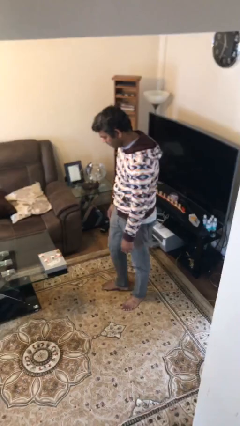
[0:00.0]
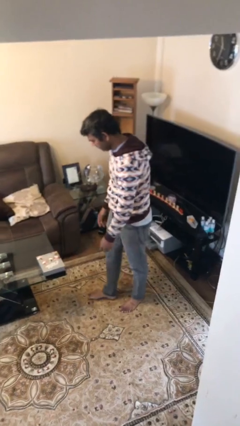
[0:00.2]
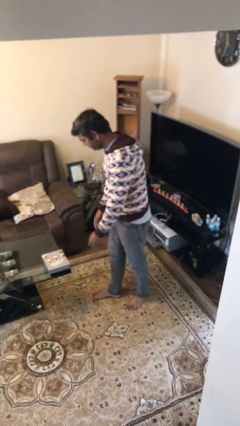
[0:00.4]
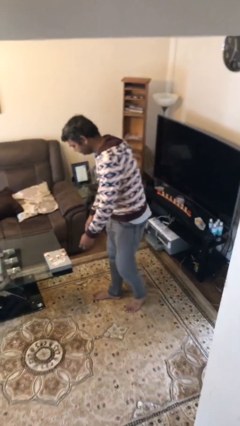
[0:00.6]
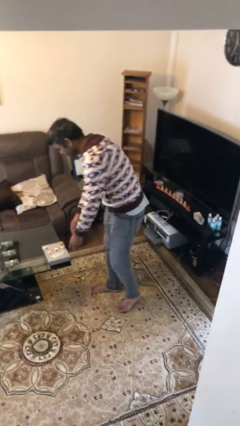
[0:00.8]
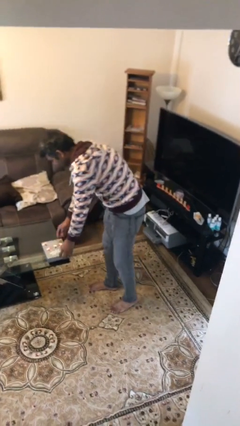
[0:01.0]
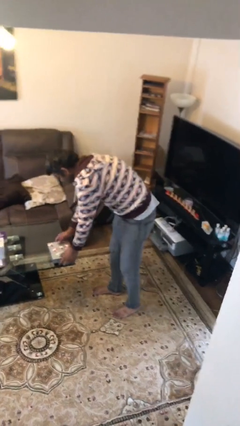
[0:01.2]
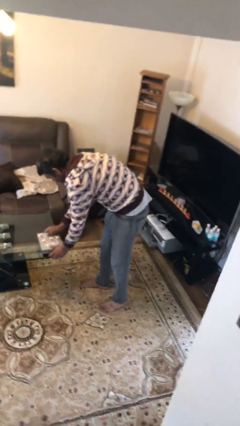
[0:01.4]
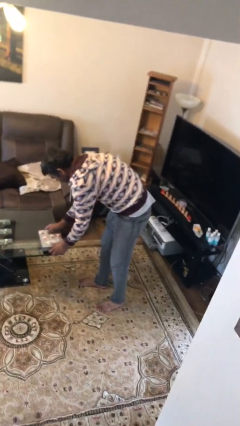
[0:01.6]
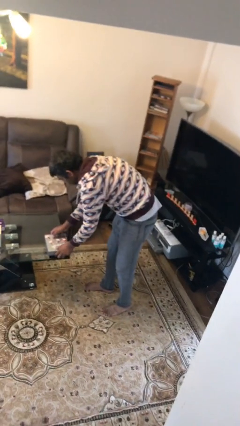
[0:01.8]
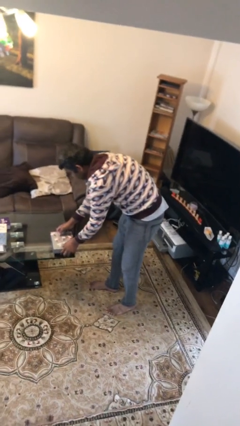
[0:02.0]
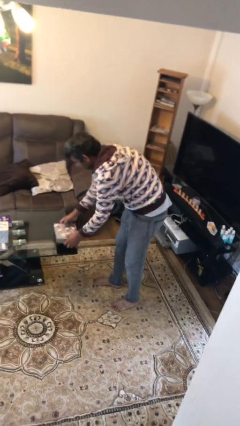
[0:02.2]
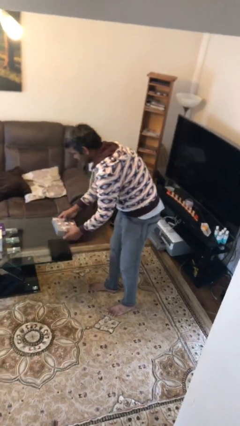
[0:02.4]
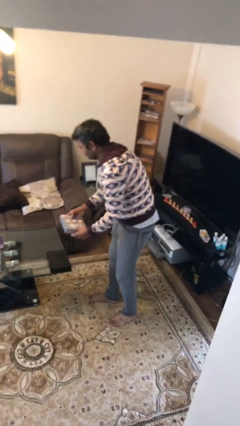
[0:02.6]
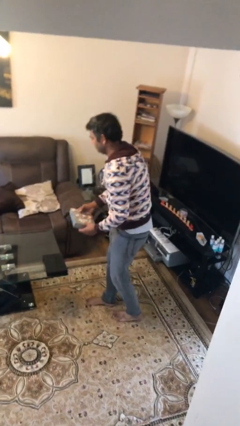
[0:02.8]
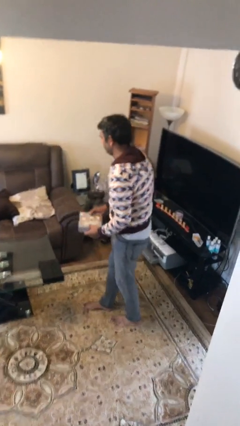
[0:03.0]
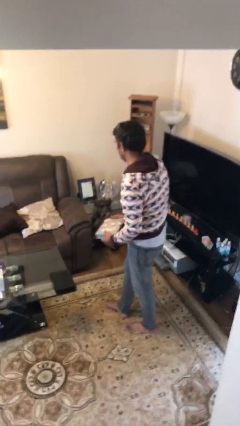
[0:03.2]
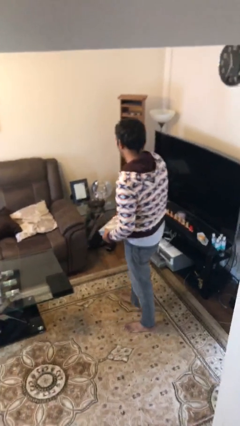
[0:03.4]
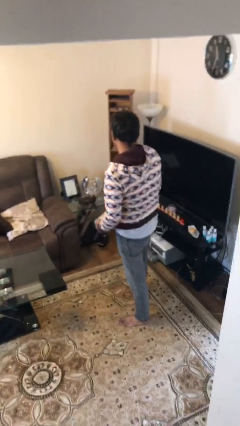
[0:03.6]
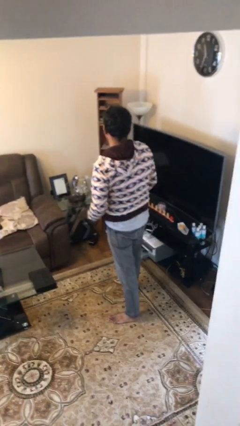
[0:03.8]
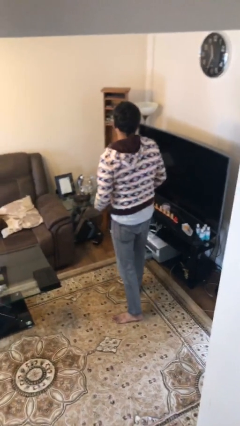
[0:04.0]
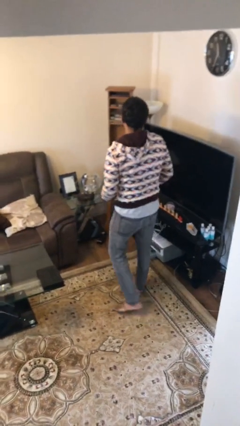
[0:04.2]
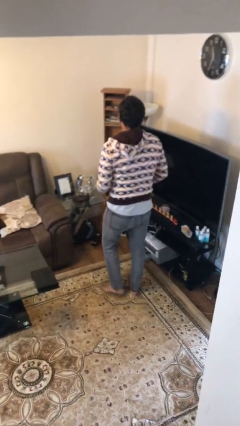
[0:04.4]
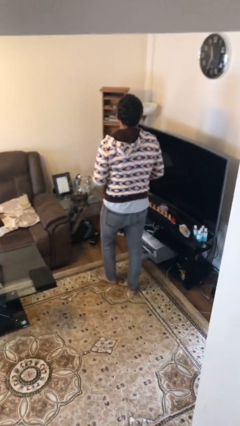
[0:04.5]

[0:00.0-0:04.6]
person picks up object from table

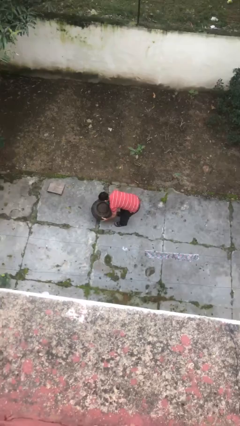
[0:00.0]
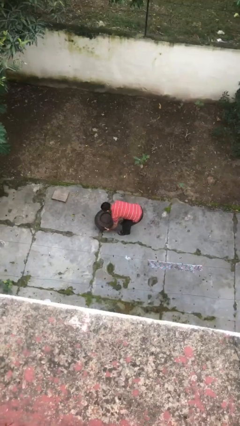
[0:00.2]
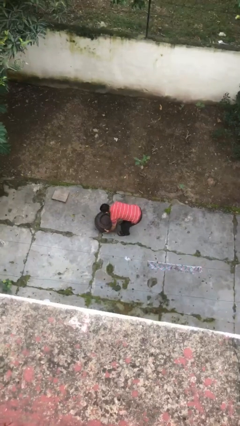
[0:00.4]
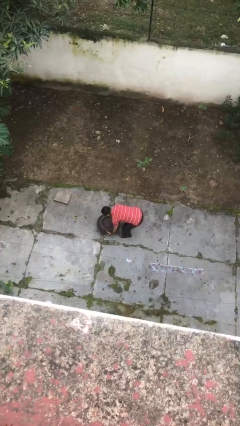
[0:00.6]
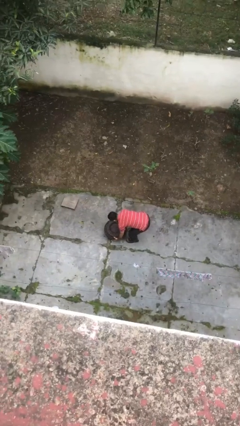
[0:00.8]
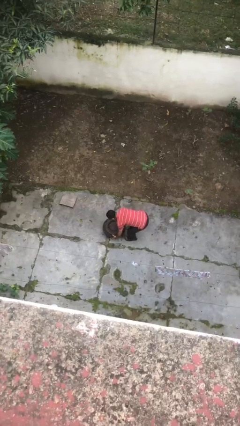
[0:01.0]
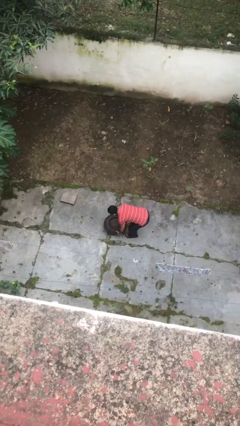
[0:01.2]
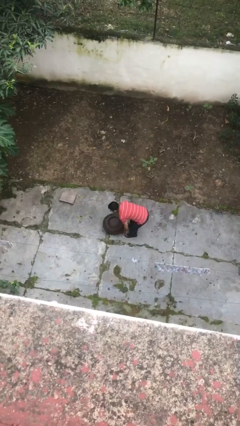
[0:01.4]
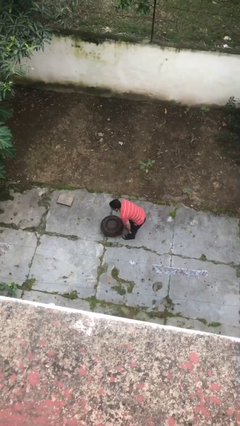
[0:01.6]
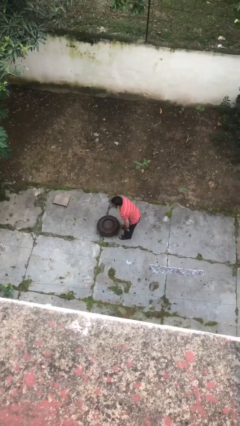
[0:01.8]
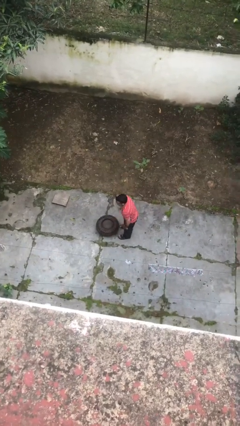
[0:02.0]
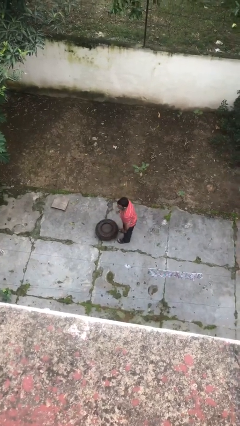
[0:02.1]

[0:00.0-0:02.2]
person puts down object on floor

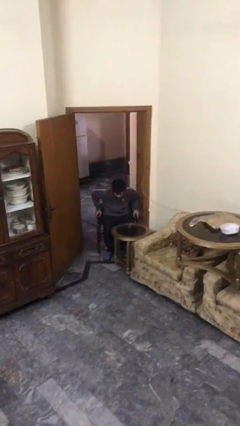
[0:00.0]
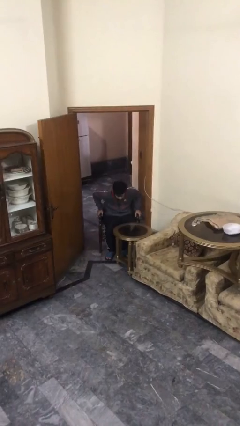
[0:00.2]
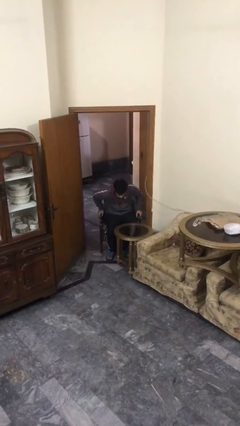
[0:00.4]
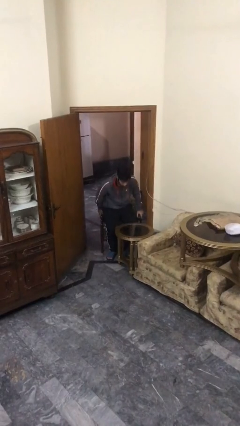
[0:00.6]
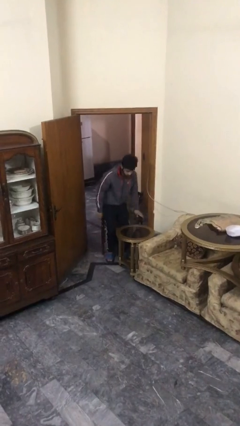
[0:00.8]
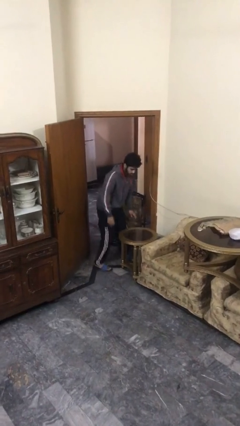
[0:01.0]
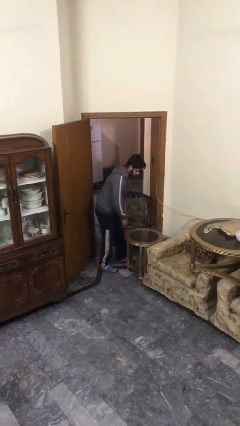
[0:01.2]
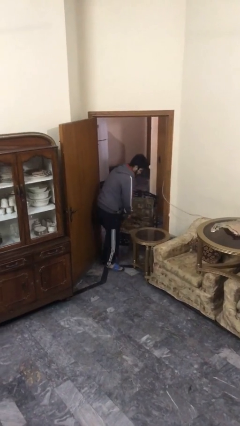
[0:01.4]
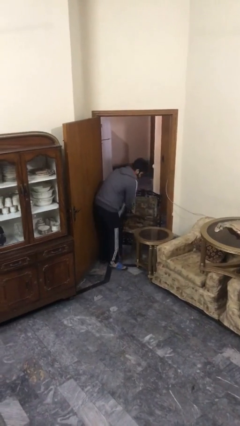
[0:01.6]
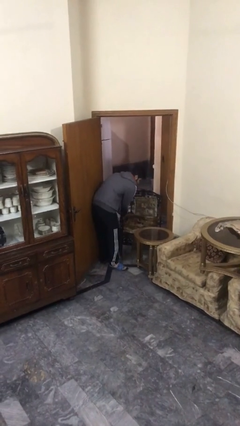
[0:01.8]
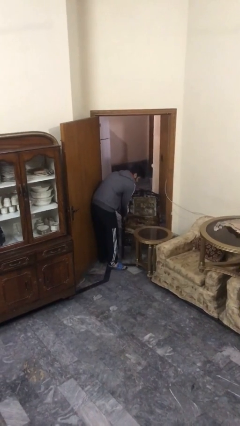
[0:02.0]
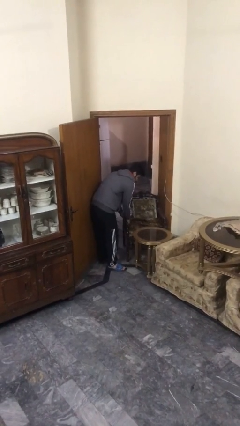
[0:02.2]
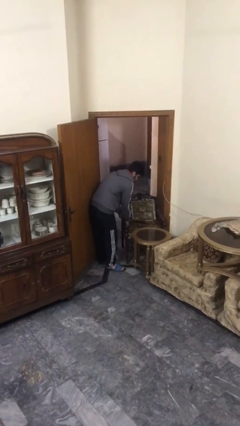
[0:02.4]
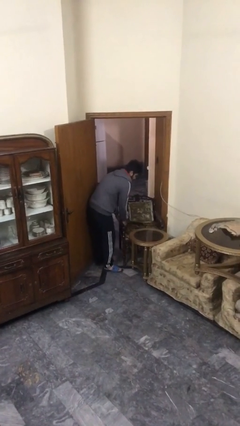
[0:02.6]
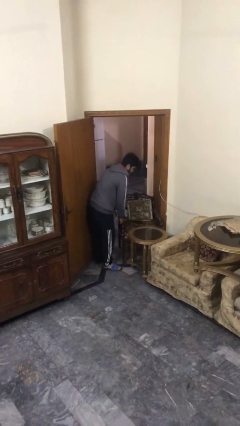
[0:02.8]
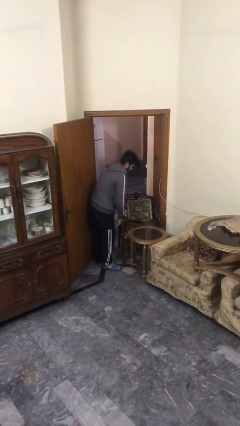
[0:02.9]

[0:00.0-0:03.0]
person stands up

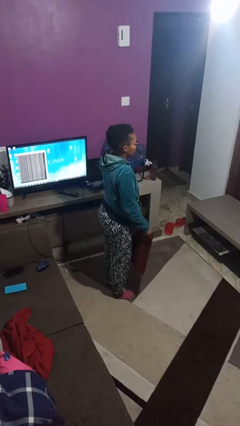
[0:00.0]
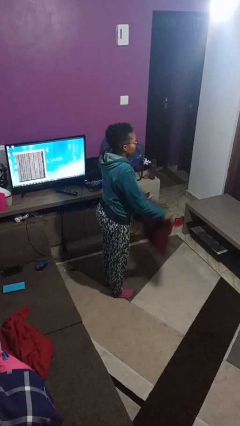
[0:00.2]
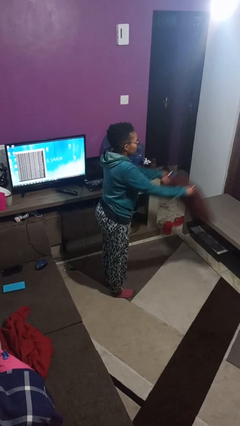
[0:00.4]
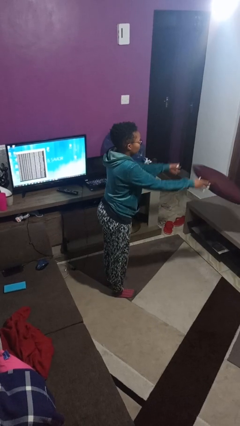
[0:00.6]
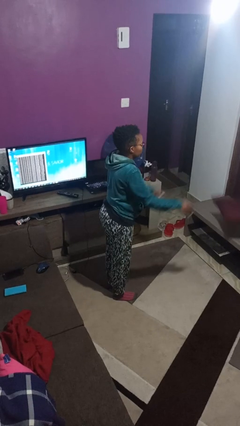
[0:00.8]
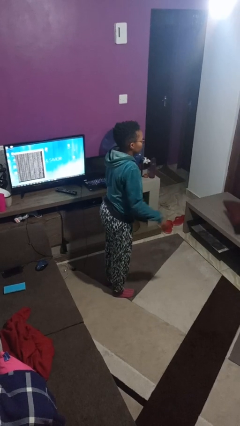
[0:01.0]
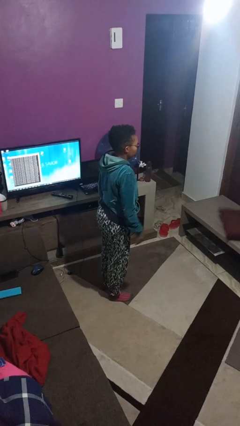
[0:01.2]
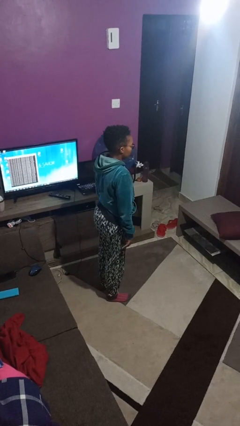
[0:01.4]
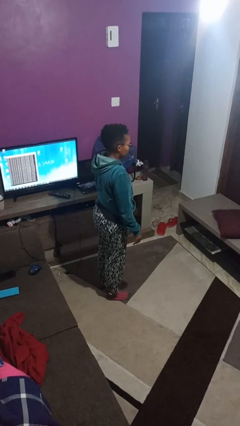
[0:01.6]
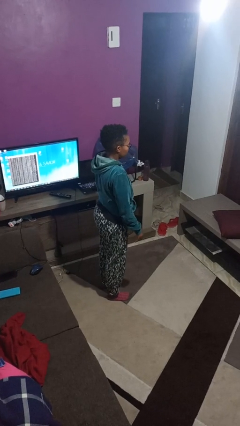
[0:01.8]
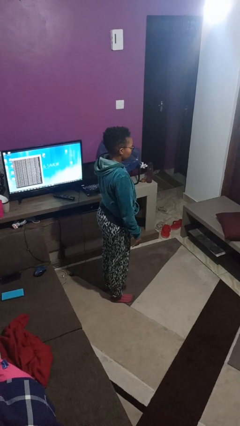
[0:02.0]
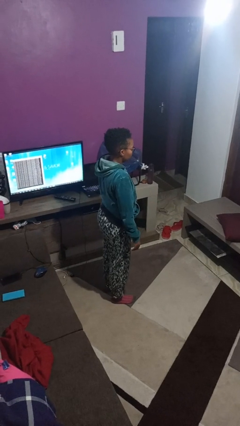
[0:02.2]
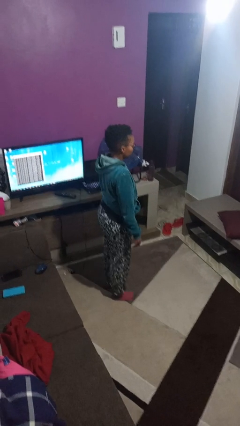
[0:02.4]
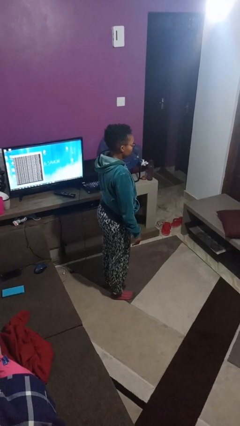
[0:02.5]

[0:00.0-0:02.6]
person throws object on table

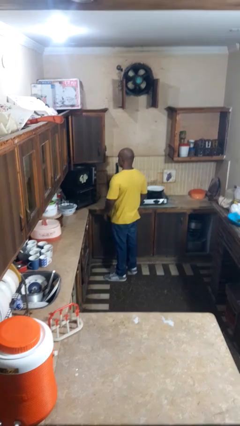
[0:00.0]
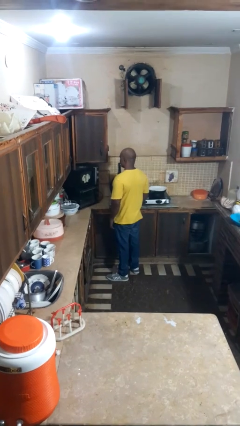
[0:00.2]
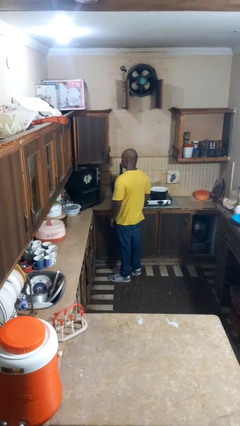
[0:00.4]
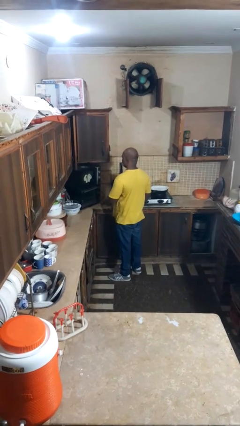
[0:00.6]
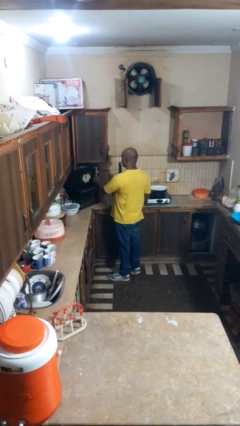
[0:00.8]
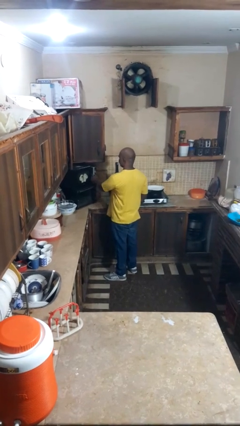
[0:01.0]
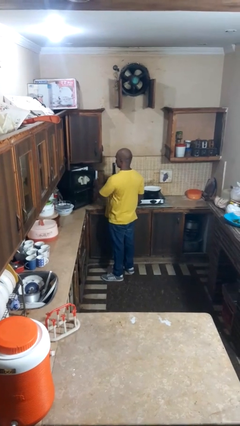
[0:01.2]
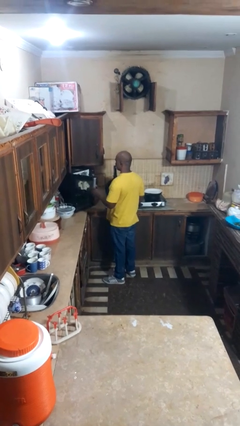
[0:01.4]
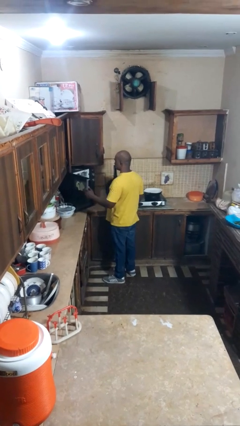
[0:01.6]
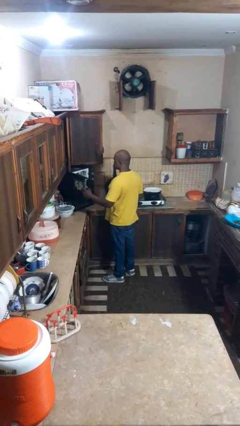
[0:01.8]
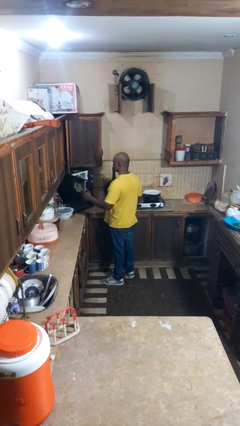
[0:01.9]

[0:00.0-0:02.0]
person opens microwave

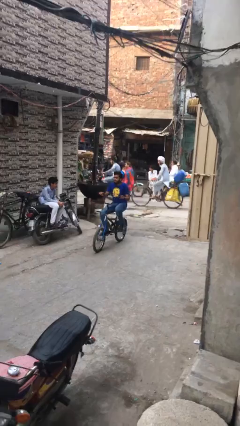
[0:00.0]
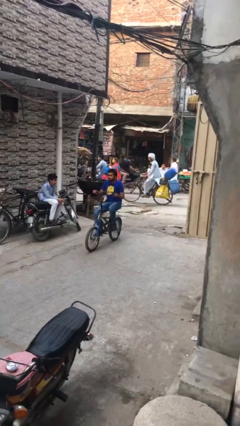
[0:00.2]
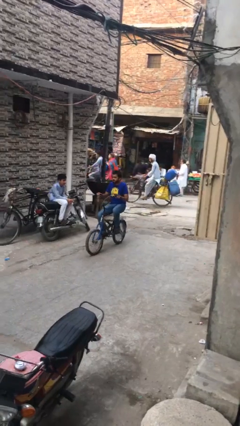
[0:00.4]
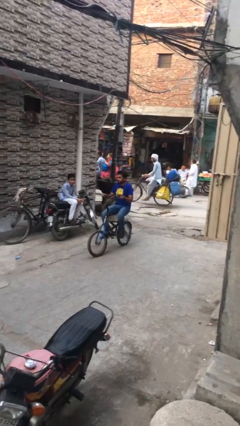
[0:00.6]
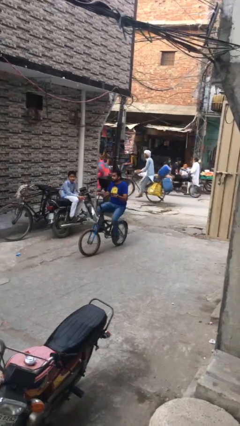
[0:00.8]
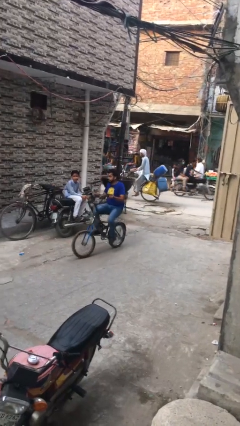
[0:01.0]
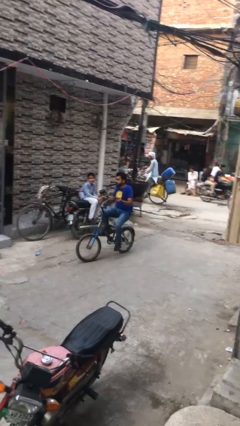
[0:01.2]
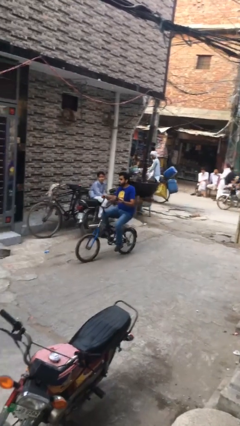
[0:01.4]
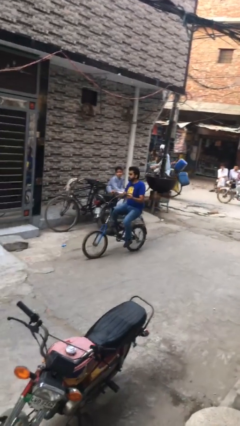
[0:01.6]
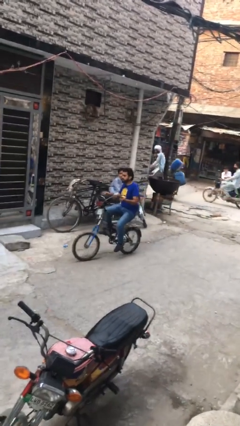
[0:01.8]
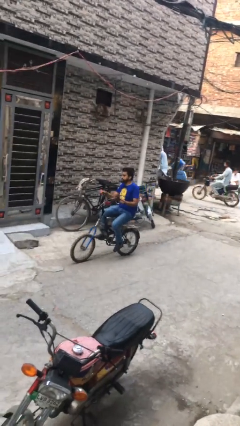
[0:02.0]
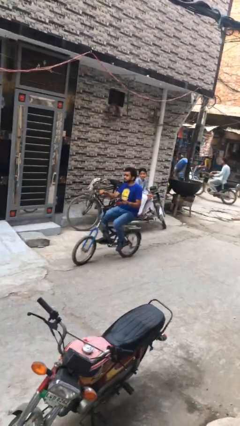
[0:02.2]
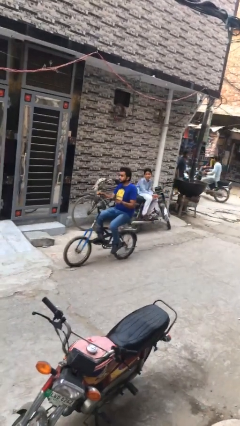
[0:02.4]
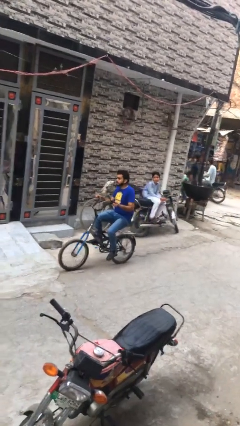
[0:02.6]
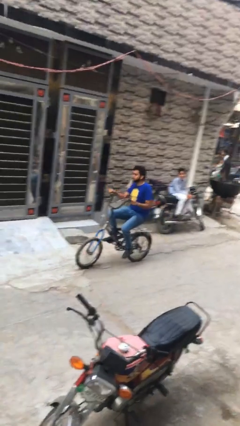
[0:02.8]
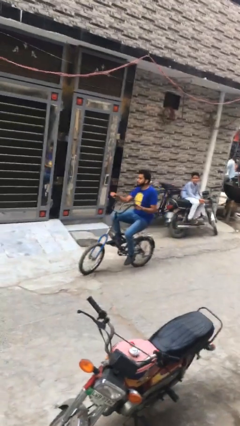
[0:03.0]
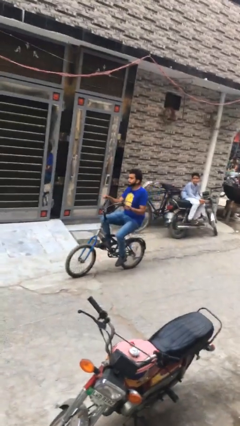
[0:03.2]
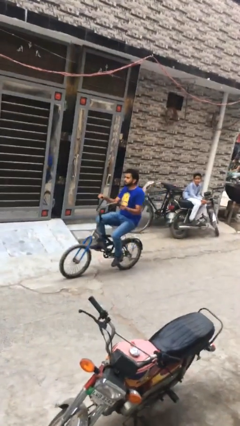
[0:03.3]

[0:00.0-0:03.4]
person rides bicycle
